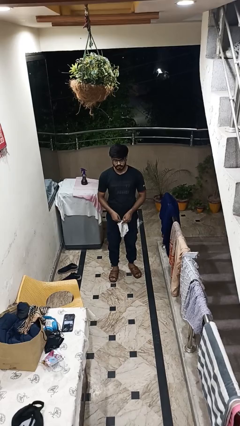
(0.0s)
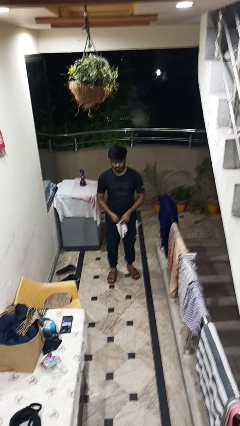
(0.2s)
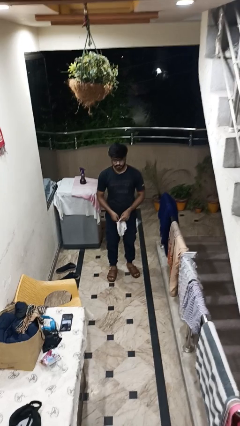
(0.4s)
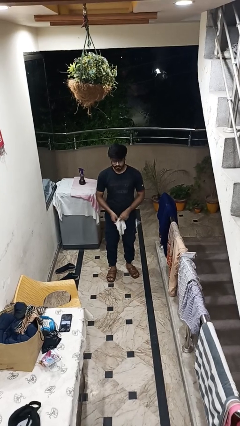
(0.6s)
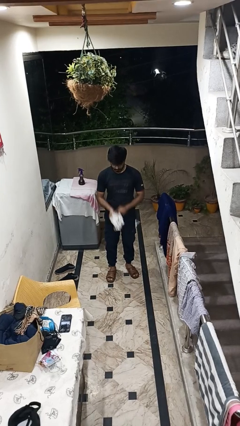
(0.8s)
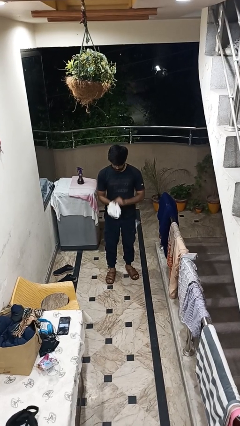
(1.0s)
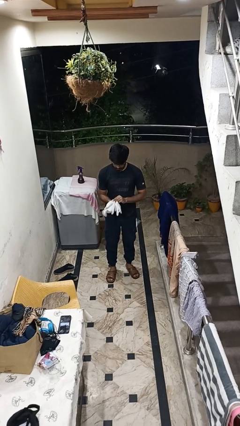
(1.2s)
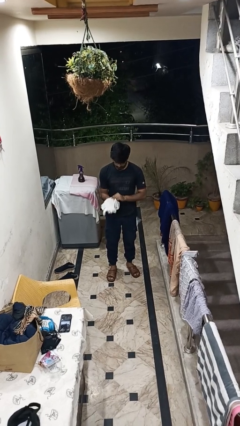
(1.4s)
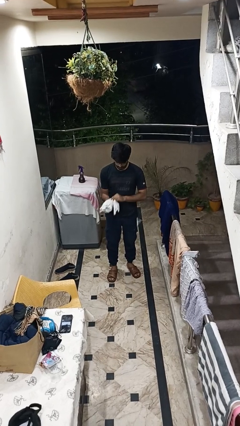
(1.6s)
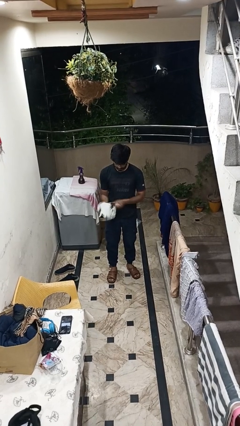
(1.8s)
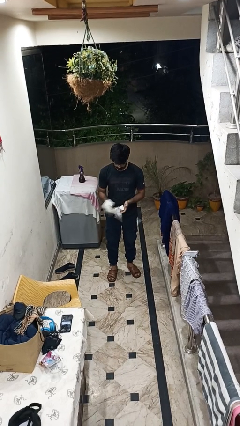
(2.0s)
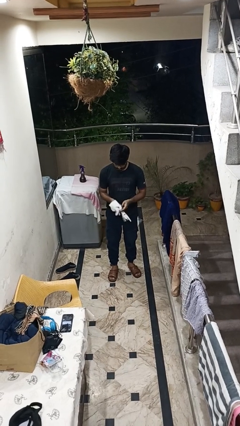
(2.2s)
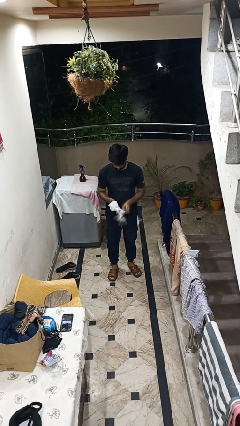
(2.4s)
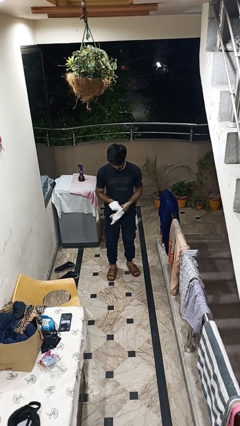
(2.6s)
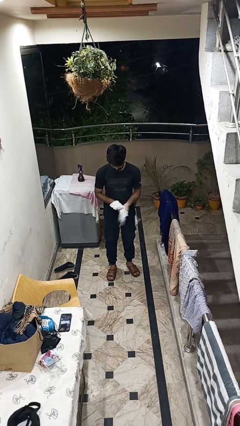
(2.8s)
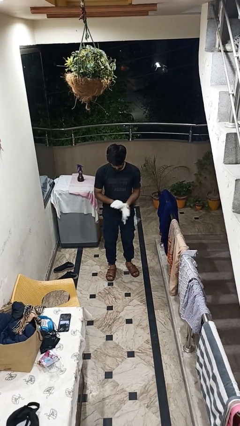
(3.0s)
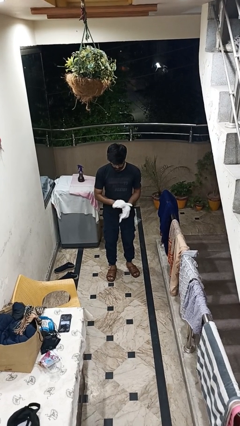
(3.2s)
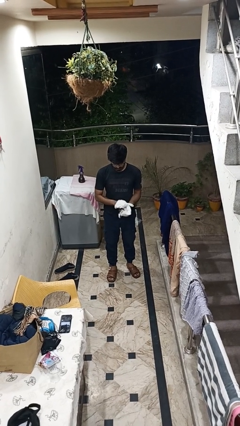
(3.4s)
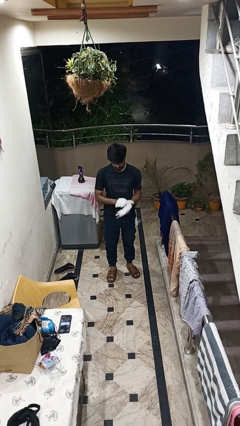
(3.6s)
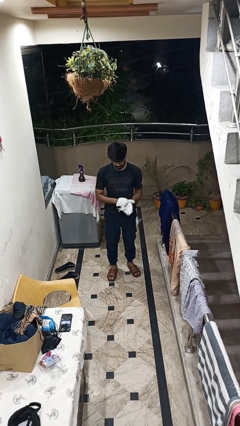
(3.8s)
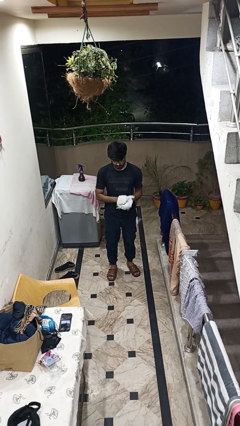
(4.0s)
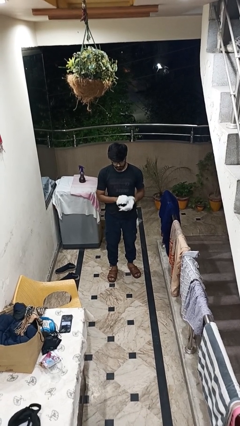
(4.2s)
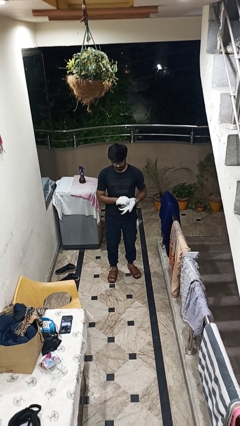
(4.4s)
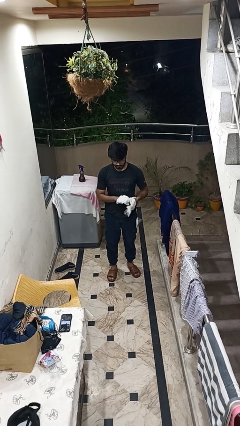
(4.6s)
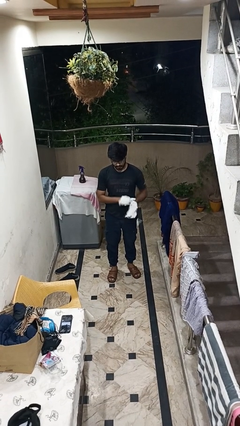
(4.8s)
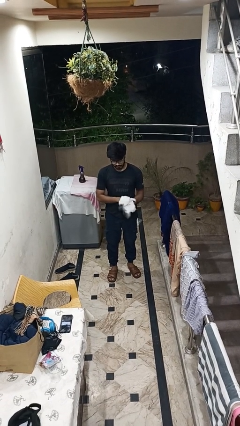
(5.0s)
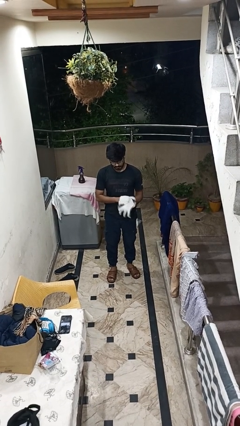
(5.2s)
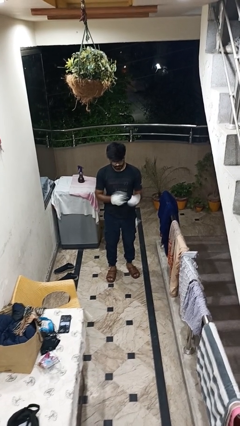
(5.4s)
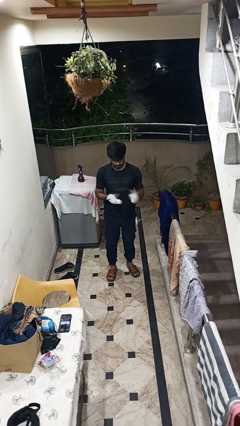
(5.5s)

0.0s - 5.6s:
person puts on gloves

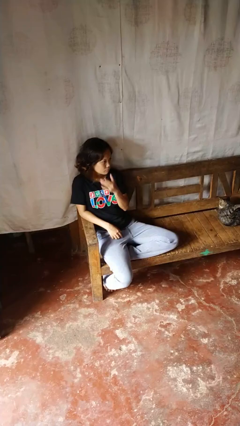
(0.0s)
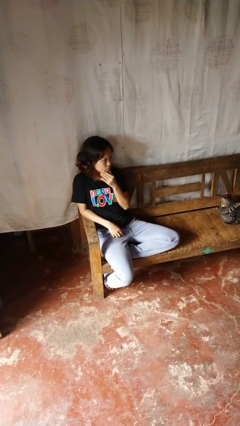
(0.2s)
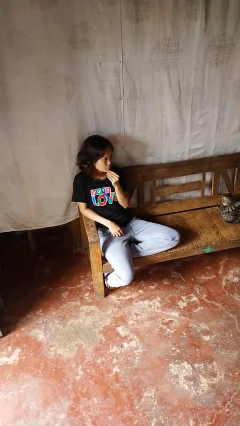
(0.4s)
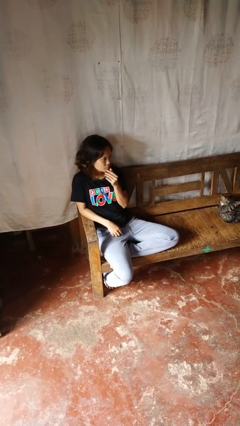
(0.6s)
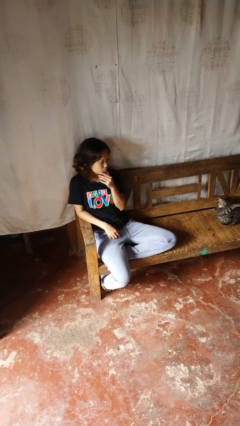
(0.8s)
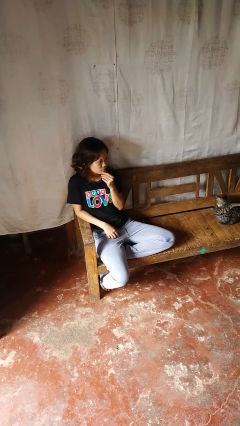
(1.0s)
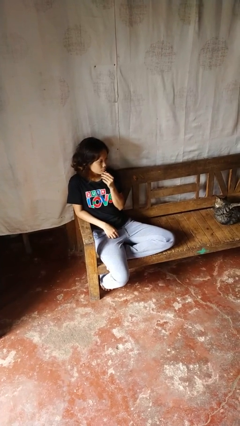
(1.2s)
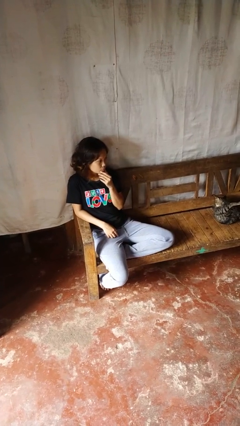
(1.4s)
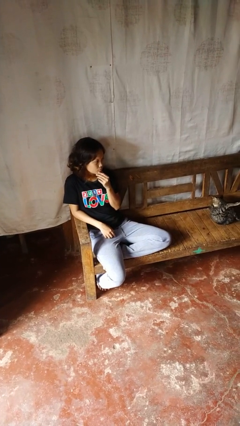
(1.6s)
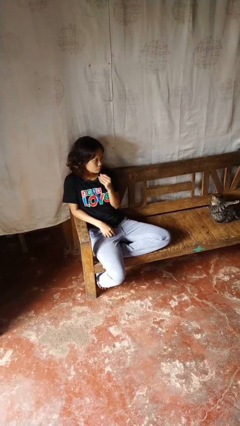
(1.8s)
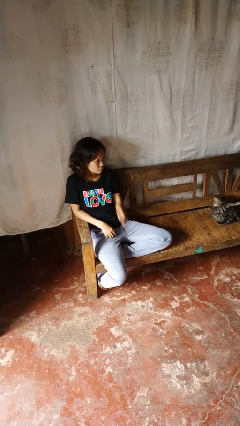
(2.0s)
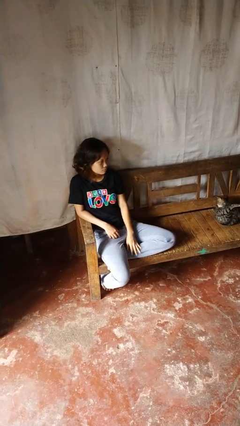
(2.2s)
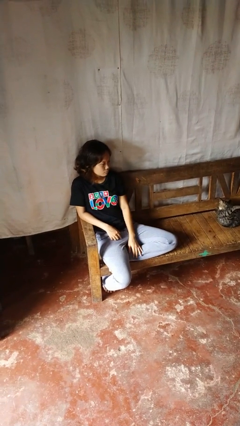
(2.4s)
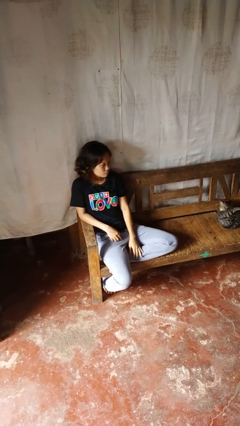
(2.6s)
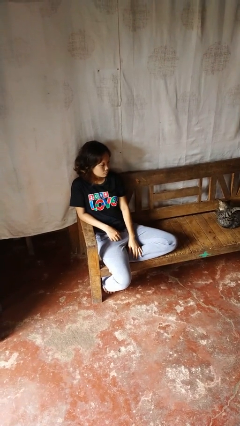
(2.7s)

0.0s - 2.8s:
person strokes chin

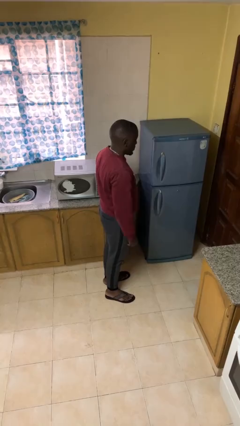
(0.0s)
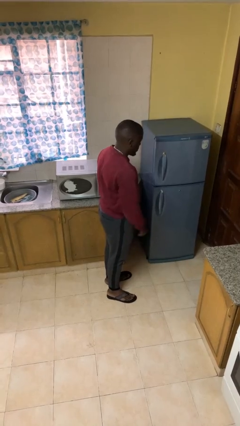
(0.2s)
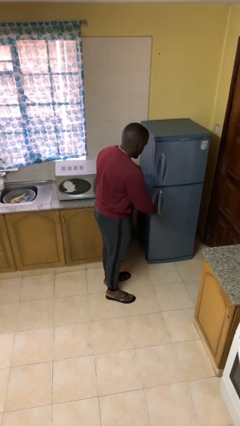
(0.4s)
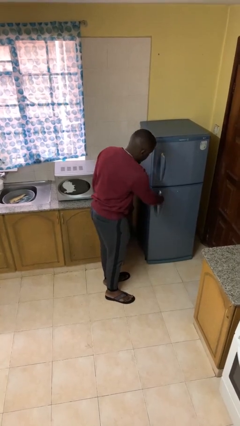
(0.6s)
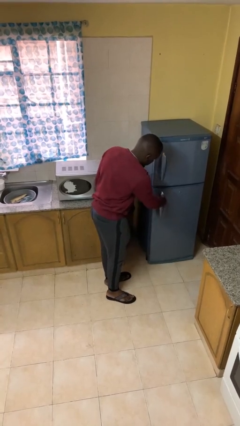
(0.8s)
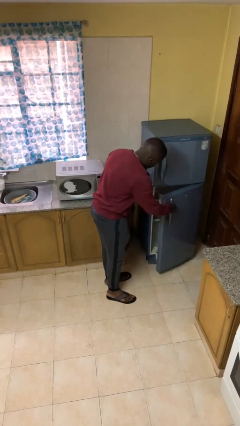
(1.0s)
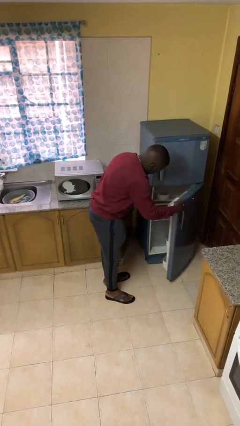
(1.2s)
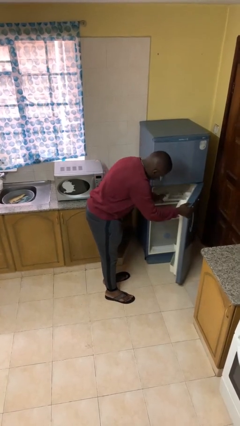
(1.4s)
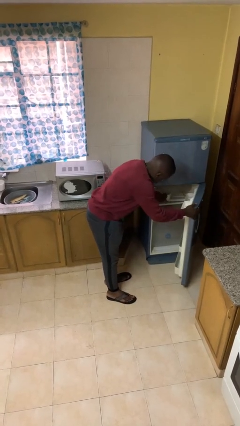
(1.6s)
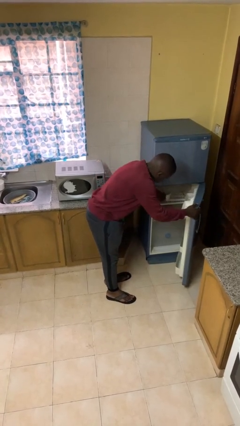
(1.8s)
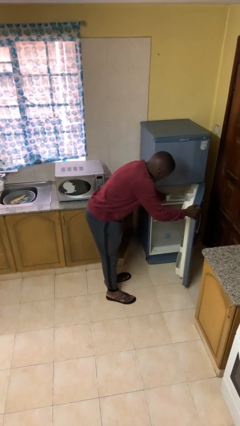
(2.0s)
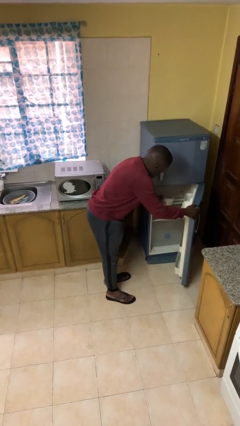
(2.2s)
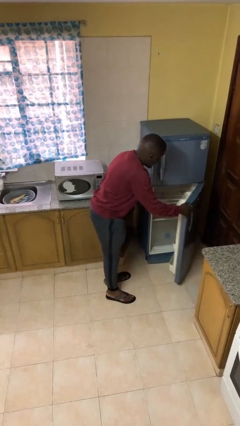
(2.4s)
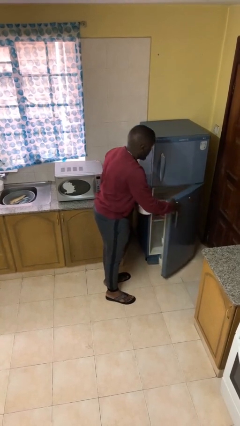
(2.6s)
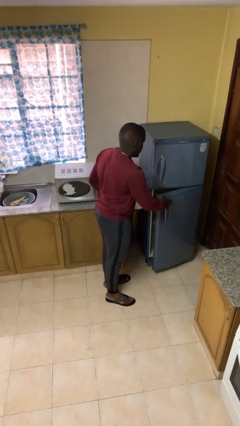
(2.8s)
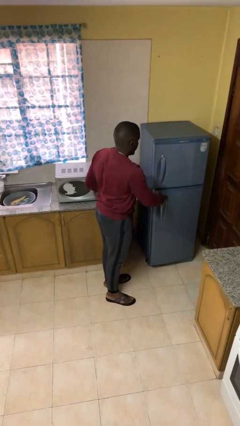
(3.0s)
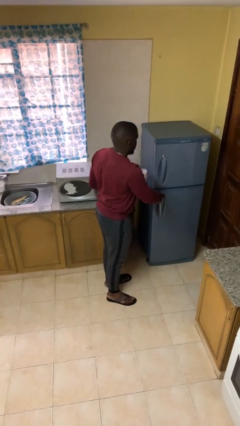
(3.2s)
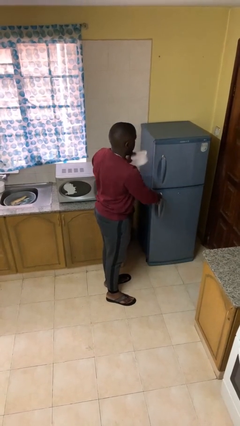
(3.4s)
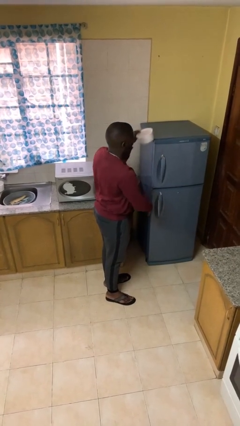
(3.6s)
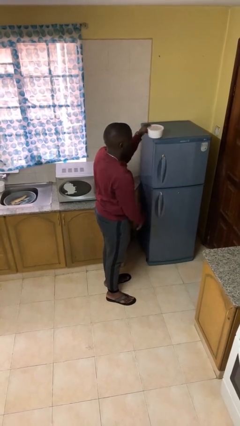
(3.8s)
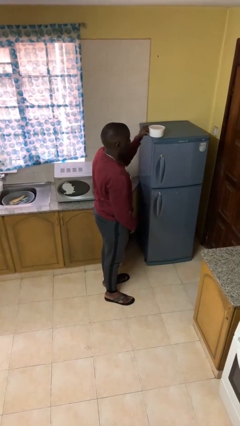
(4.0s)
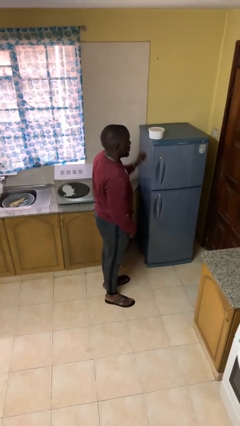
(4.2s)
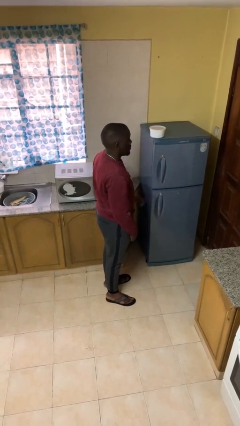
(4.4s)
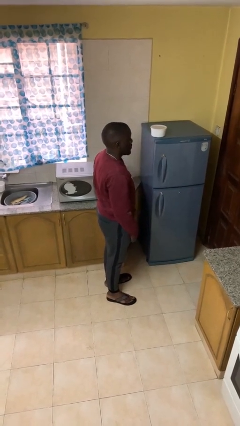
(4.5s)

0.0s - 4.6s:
person takes object from refrigerator

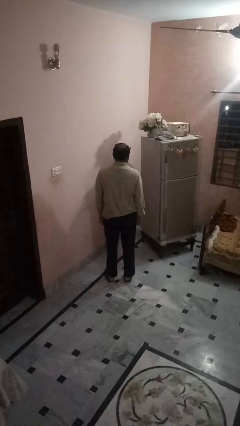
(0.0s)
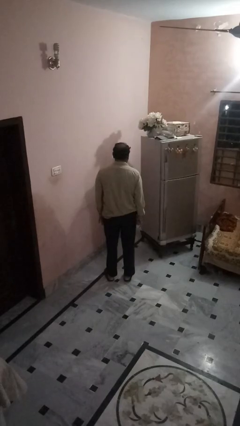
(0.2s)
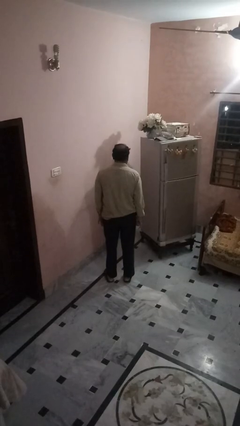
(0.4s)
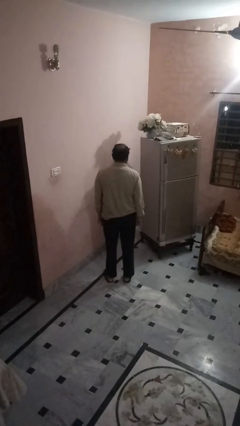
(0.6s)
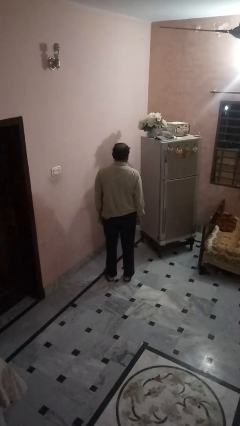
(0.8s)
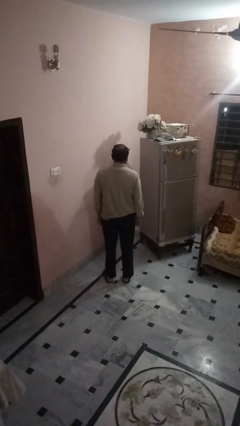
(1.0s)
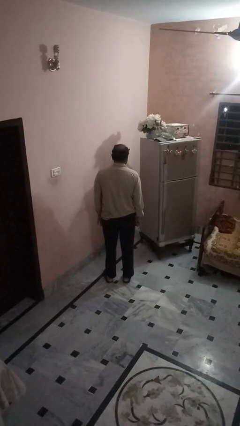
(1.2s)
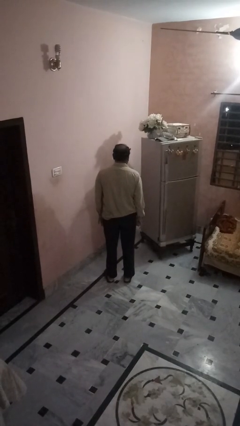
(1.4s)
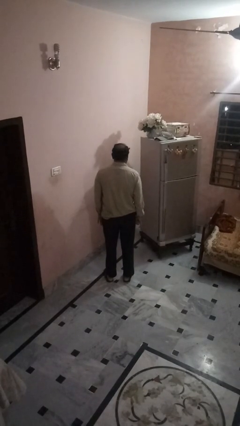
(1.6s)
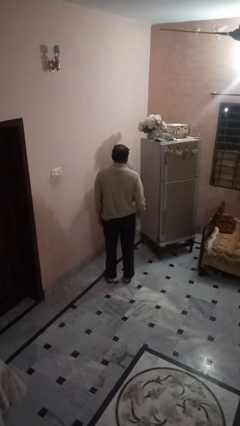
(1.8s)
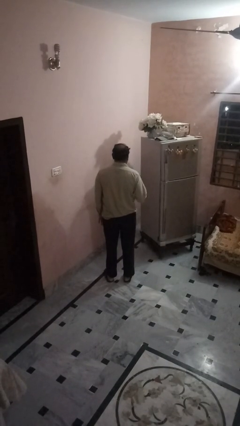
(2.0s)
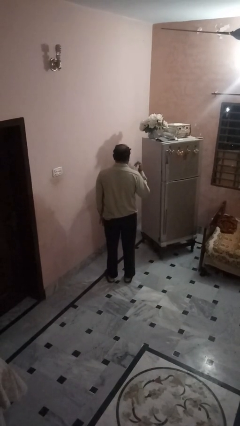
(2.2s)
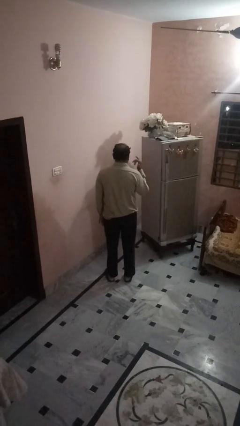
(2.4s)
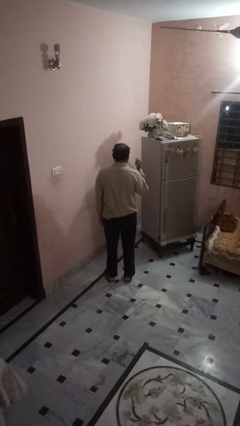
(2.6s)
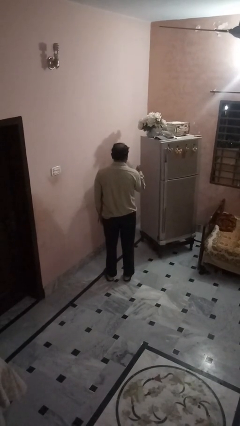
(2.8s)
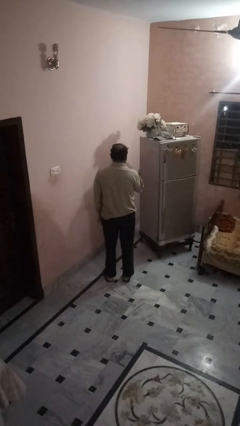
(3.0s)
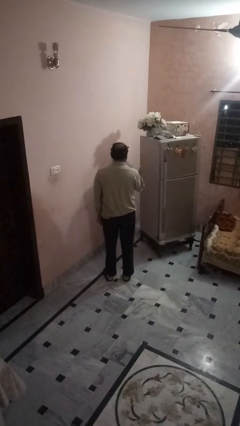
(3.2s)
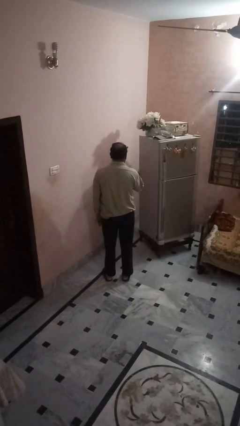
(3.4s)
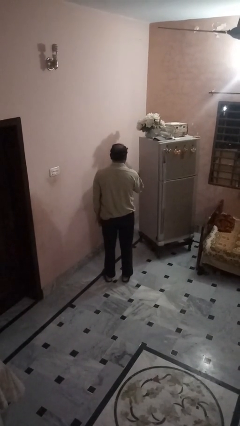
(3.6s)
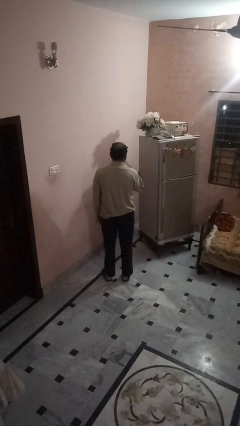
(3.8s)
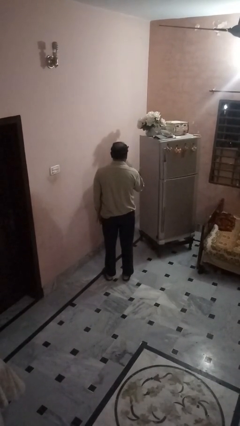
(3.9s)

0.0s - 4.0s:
person gestures hang loose

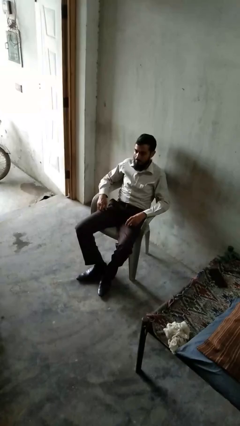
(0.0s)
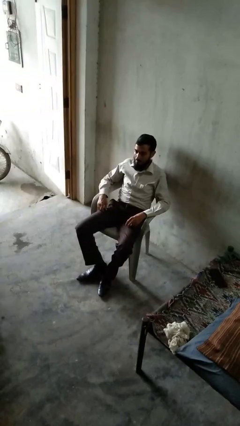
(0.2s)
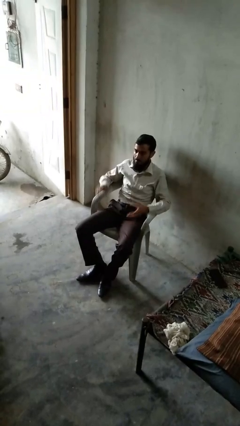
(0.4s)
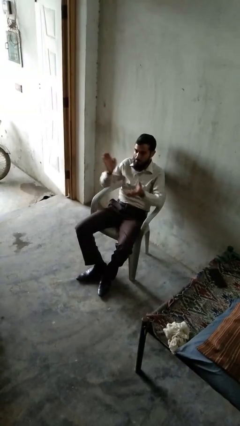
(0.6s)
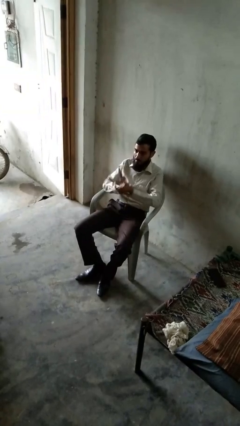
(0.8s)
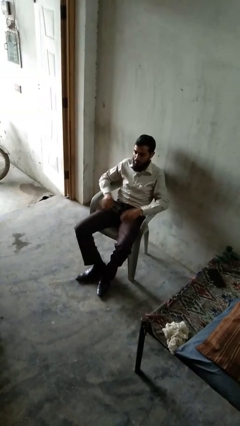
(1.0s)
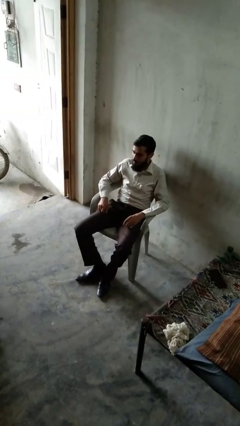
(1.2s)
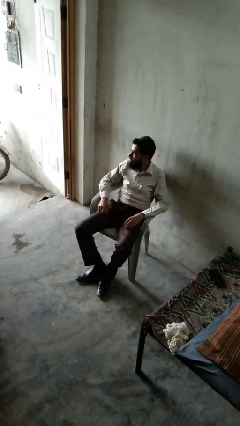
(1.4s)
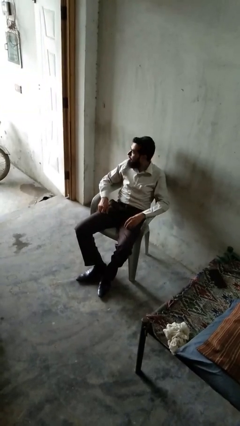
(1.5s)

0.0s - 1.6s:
person claps hands
